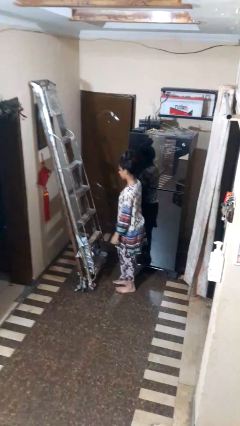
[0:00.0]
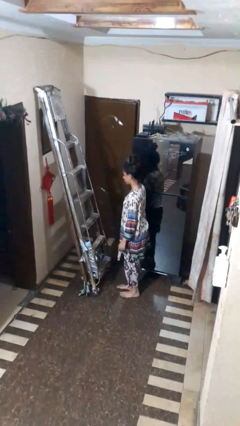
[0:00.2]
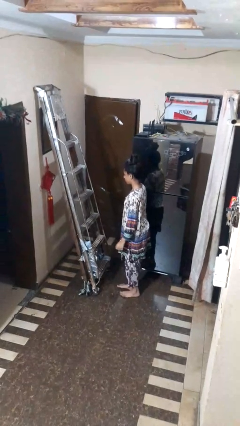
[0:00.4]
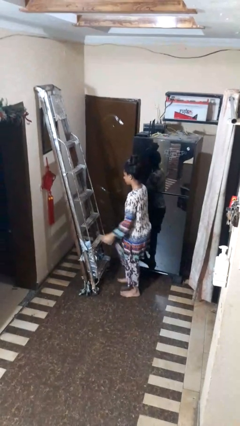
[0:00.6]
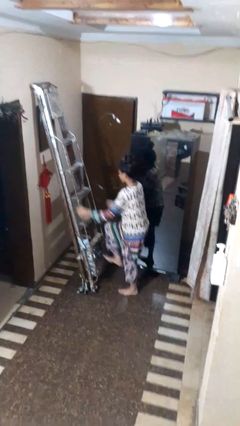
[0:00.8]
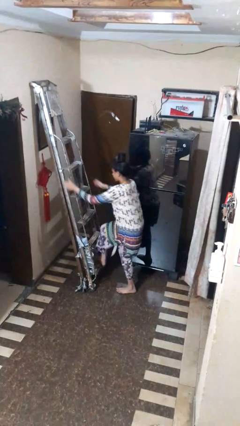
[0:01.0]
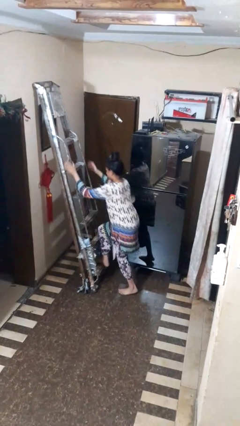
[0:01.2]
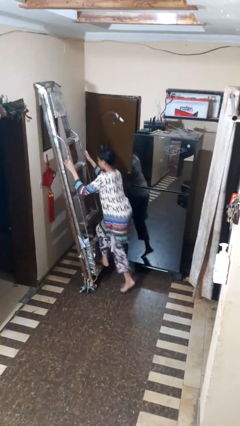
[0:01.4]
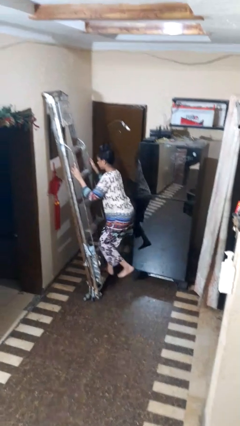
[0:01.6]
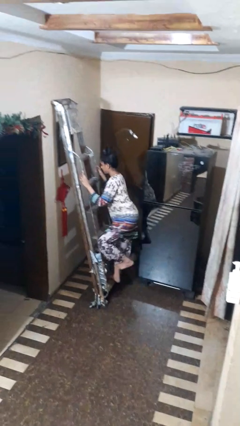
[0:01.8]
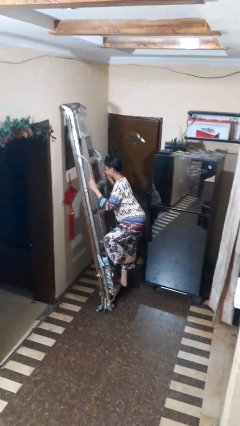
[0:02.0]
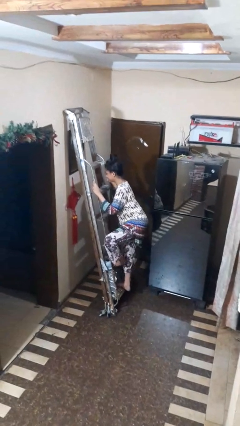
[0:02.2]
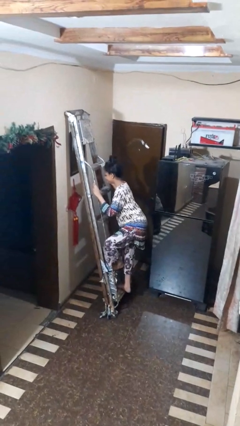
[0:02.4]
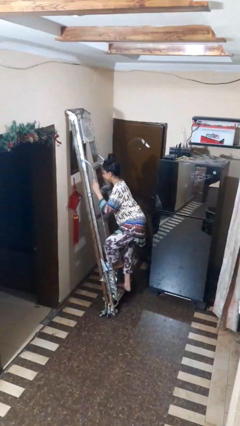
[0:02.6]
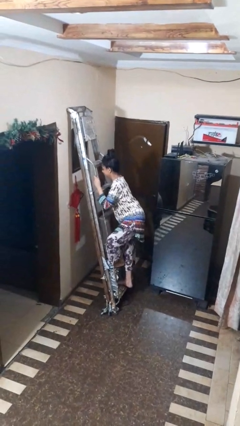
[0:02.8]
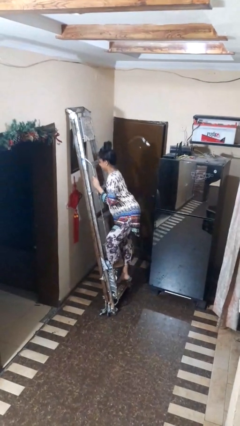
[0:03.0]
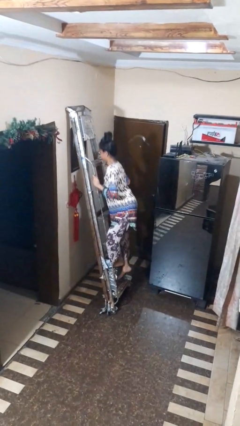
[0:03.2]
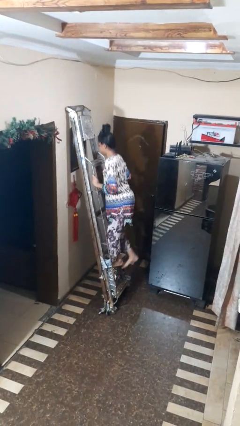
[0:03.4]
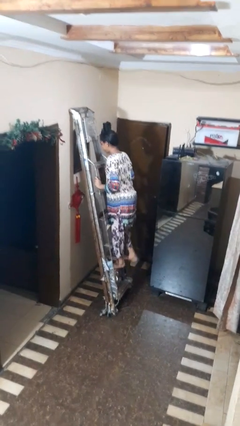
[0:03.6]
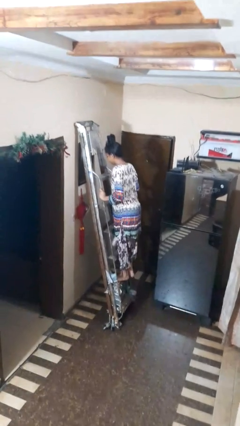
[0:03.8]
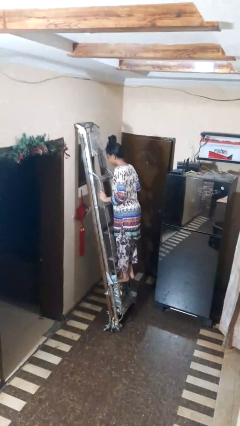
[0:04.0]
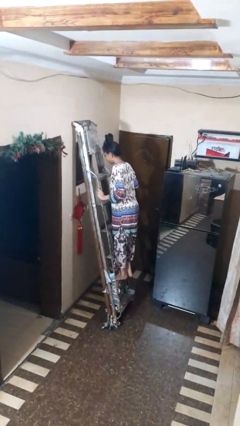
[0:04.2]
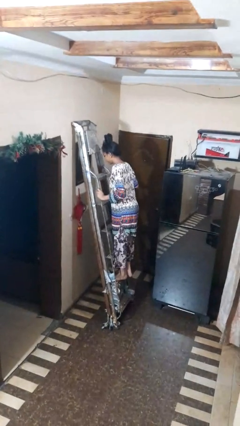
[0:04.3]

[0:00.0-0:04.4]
person climbs up ladder

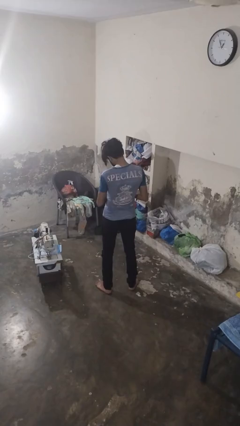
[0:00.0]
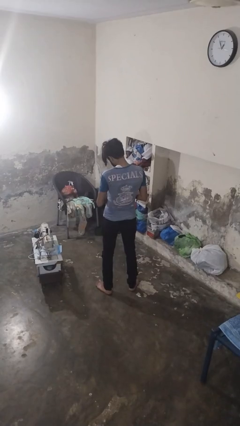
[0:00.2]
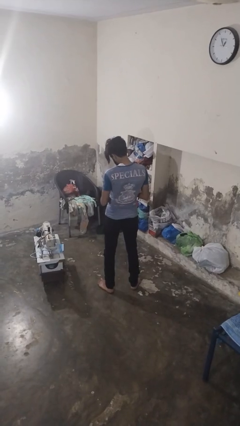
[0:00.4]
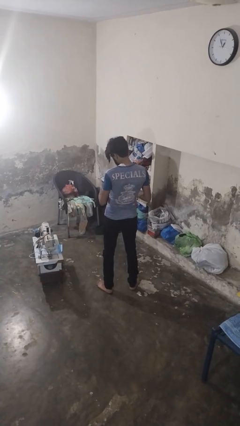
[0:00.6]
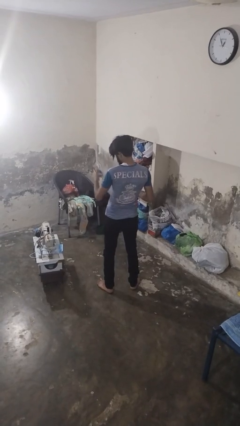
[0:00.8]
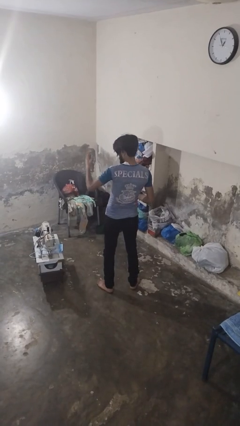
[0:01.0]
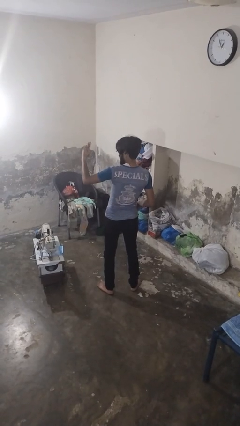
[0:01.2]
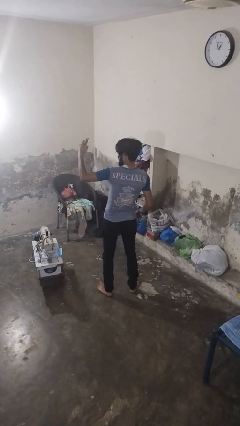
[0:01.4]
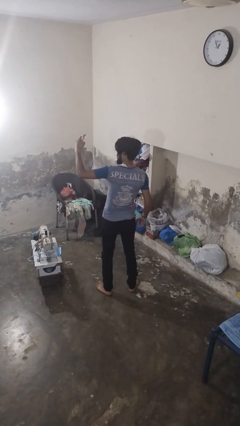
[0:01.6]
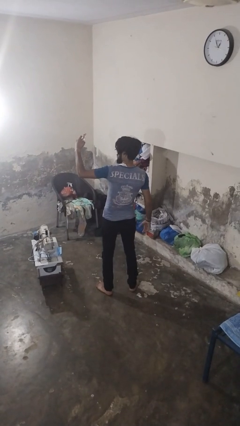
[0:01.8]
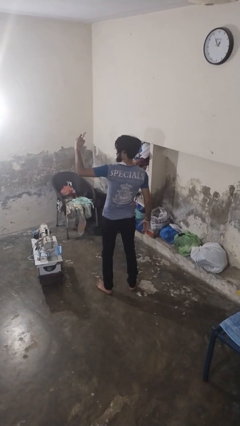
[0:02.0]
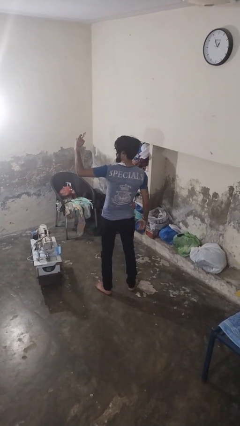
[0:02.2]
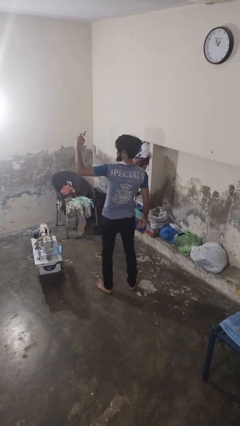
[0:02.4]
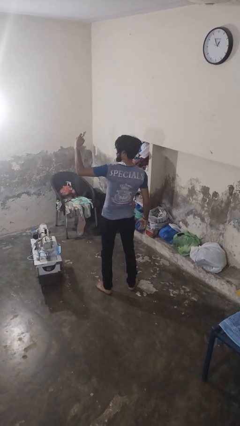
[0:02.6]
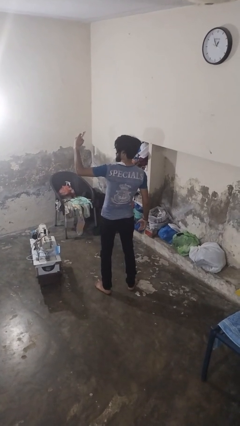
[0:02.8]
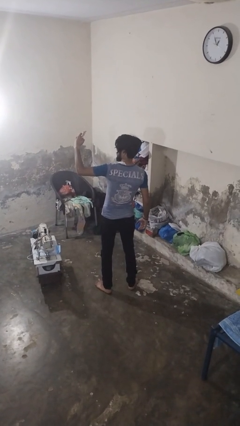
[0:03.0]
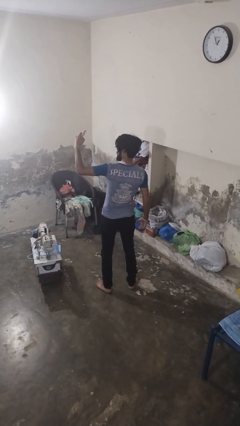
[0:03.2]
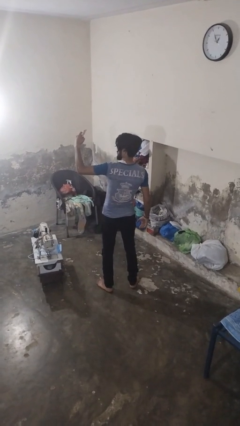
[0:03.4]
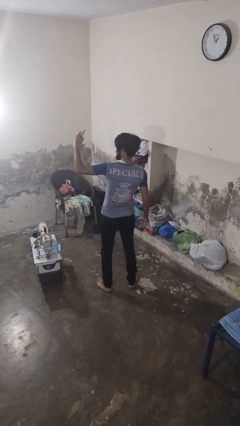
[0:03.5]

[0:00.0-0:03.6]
person takes selfie

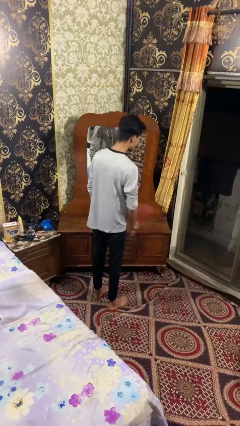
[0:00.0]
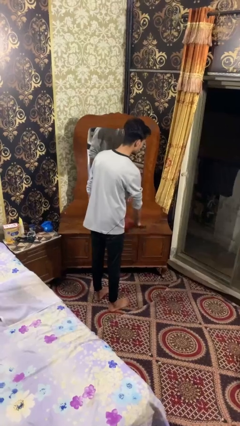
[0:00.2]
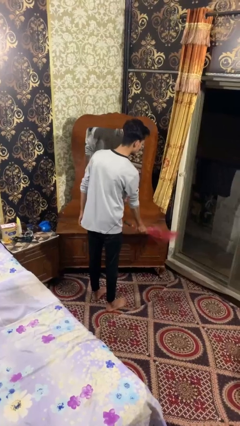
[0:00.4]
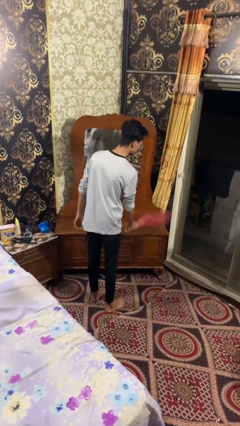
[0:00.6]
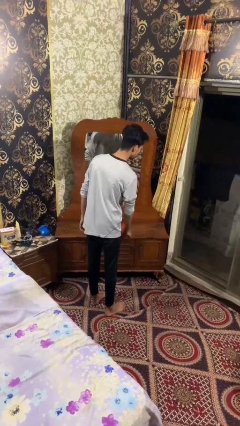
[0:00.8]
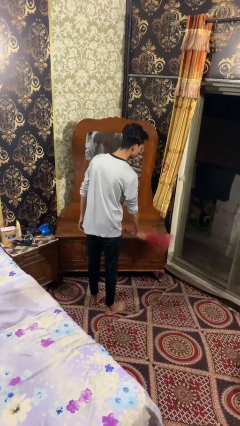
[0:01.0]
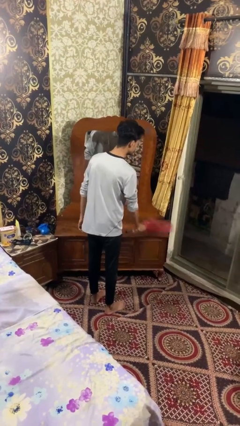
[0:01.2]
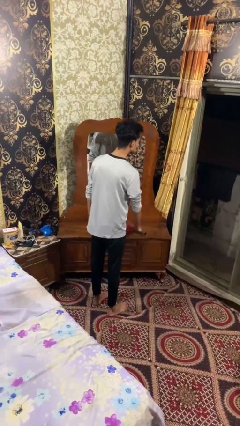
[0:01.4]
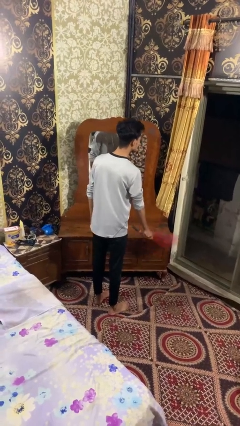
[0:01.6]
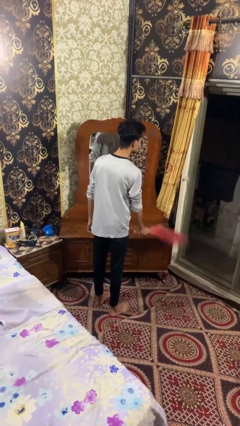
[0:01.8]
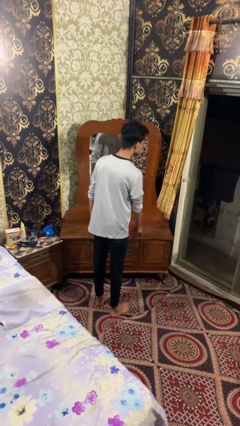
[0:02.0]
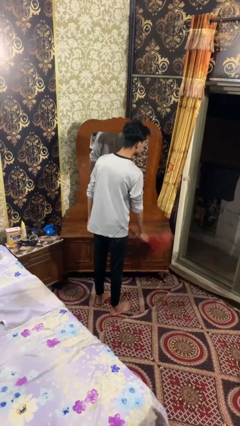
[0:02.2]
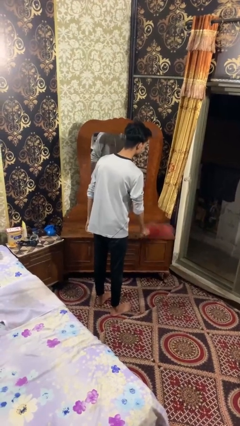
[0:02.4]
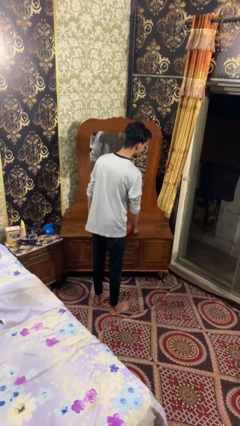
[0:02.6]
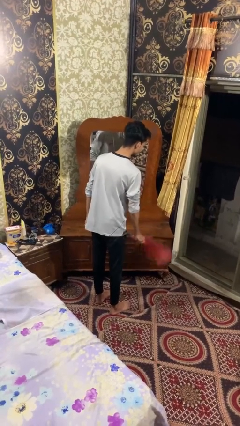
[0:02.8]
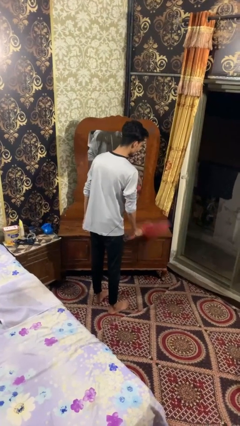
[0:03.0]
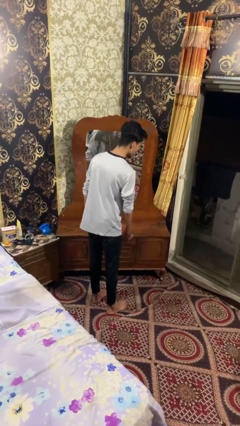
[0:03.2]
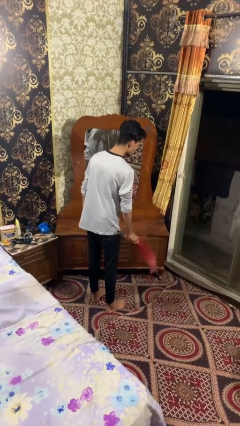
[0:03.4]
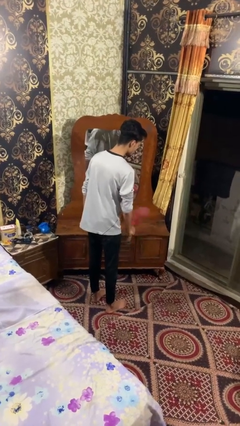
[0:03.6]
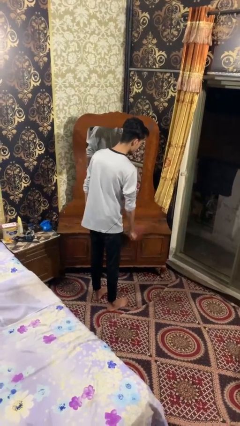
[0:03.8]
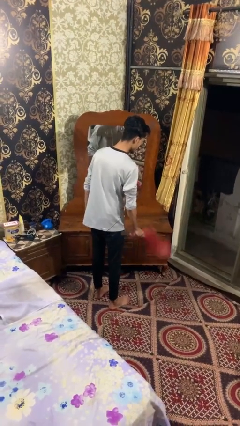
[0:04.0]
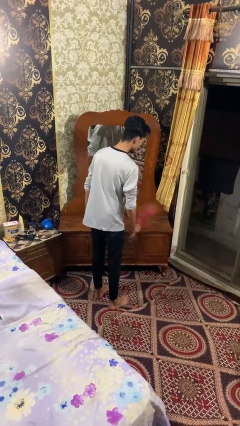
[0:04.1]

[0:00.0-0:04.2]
person dusts furniture

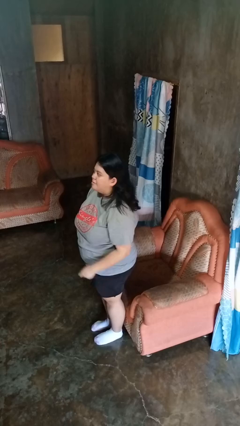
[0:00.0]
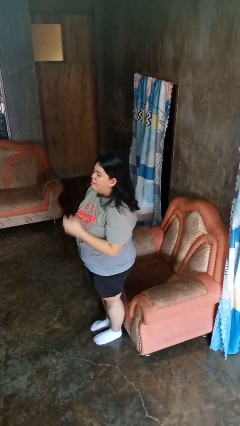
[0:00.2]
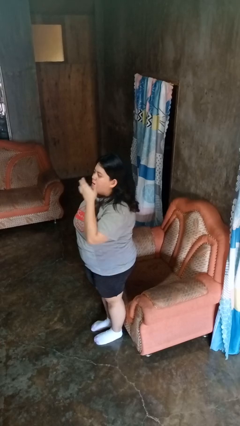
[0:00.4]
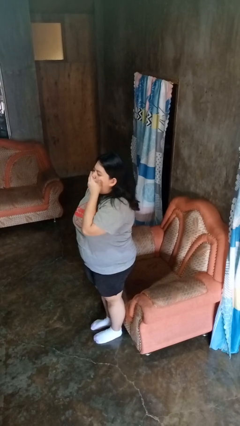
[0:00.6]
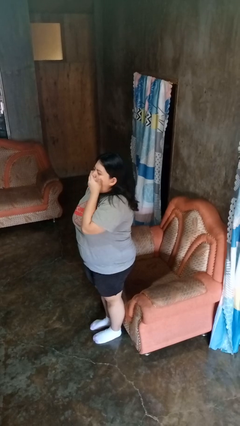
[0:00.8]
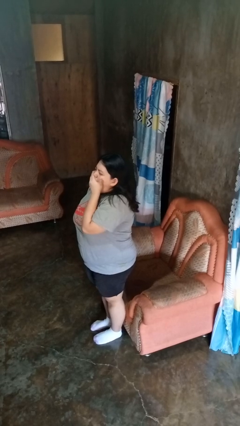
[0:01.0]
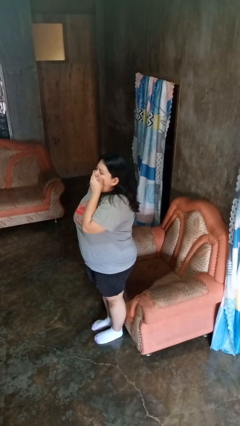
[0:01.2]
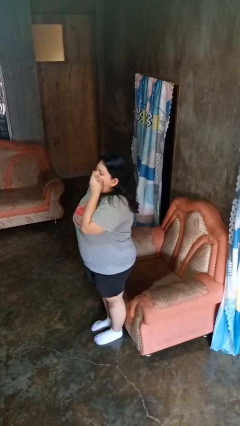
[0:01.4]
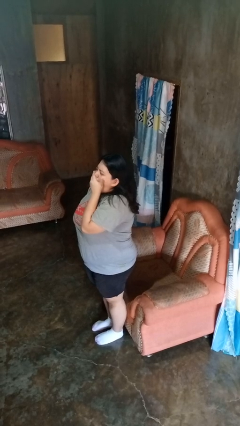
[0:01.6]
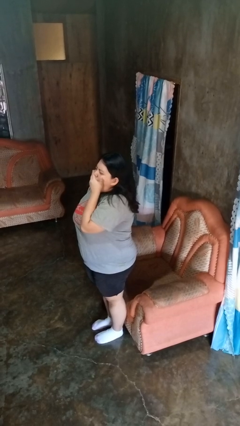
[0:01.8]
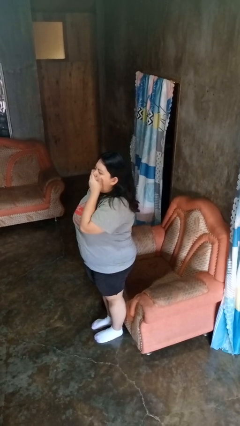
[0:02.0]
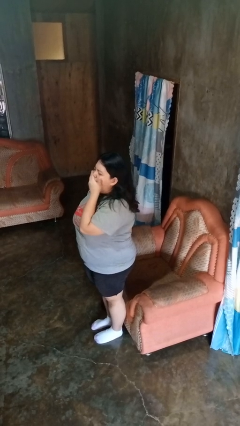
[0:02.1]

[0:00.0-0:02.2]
person yawns

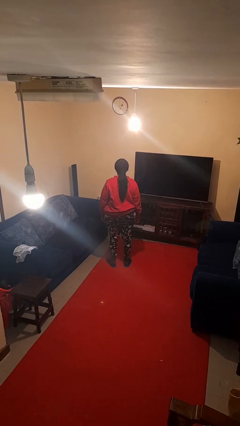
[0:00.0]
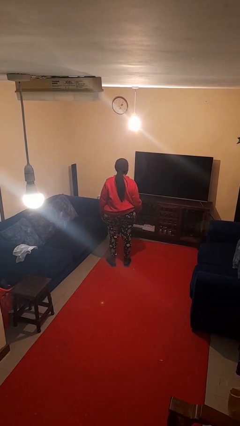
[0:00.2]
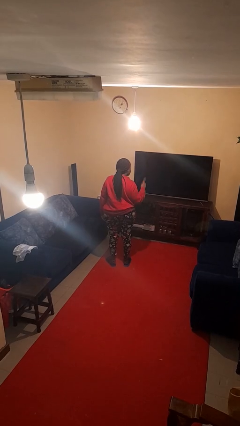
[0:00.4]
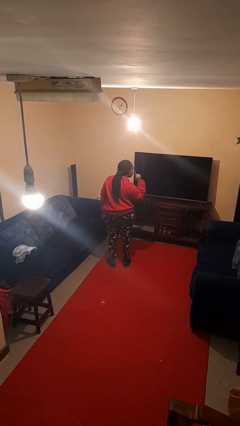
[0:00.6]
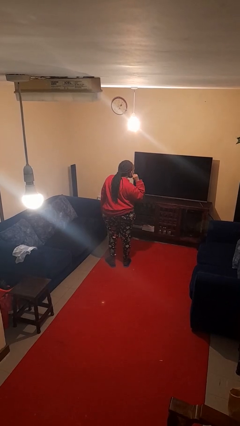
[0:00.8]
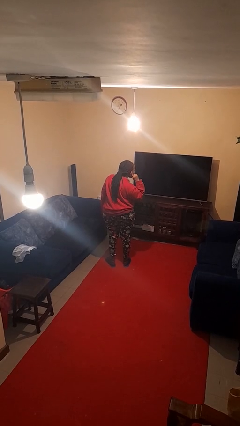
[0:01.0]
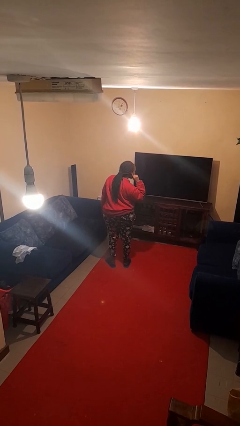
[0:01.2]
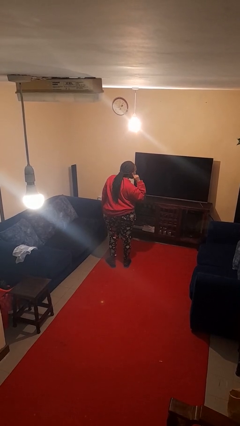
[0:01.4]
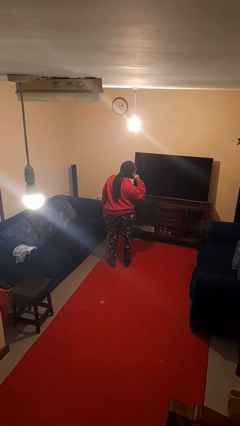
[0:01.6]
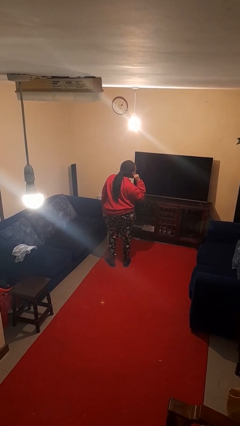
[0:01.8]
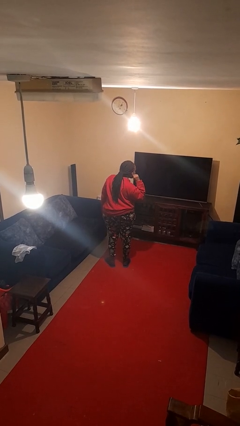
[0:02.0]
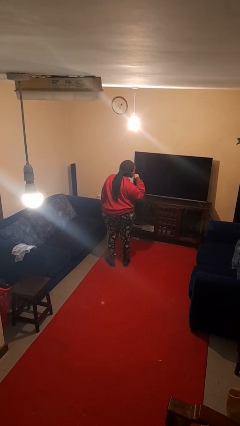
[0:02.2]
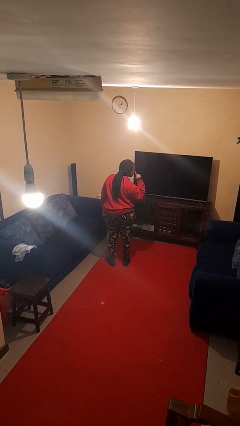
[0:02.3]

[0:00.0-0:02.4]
person gestures listen closely

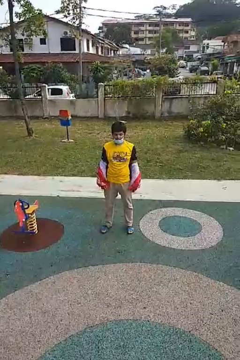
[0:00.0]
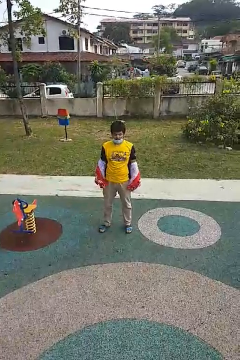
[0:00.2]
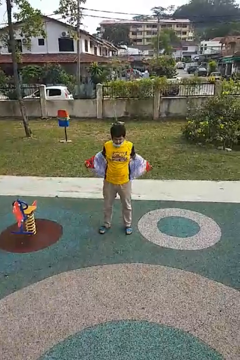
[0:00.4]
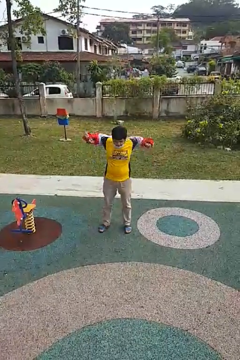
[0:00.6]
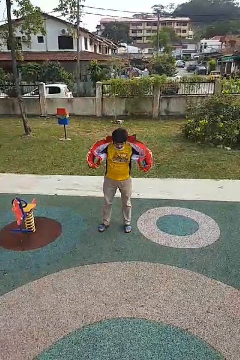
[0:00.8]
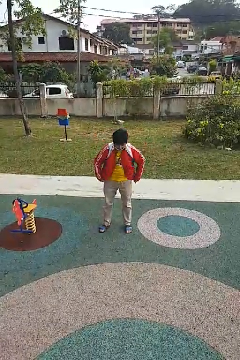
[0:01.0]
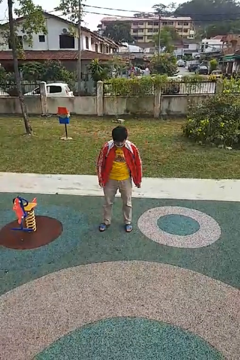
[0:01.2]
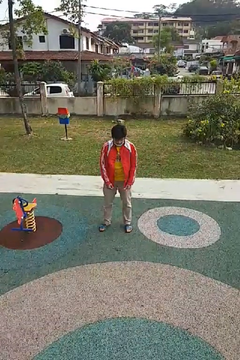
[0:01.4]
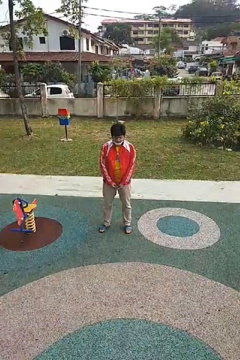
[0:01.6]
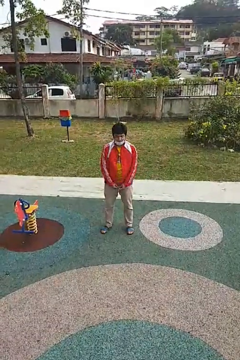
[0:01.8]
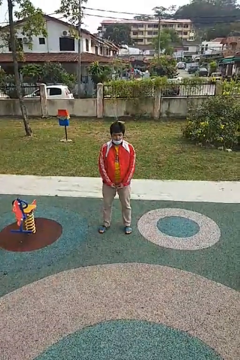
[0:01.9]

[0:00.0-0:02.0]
person puts on jacket
